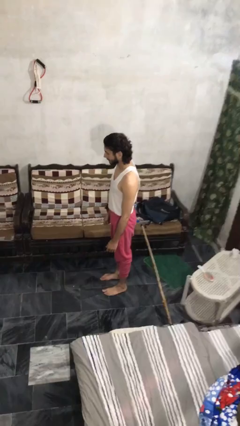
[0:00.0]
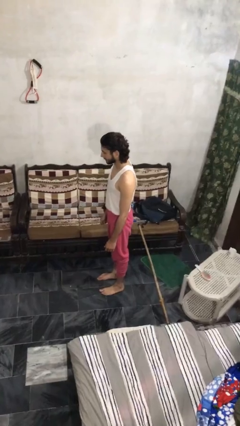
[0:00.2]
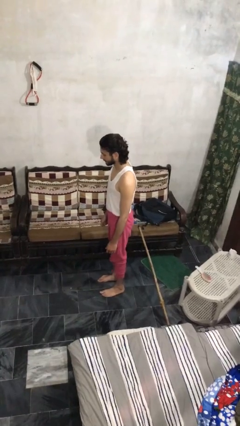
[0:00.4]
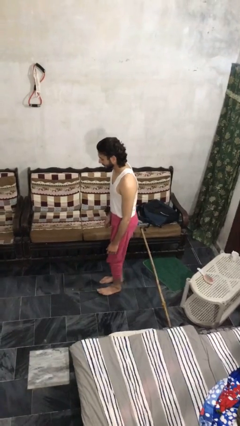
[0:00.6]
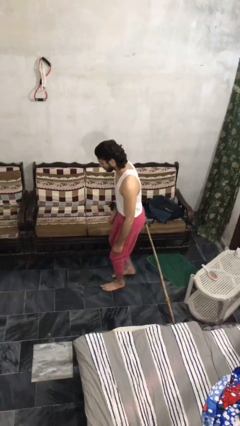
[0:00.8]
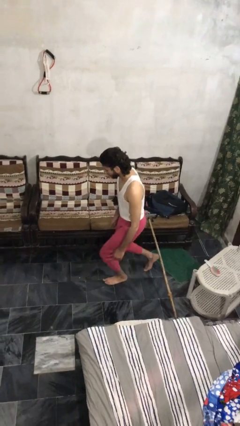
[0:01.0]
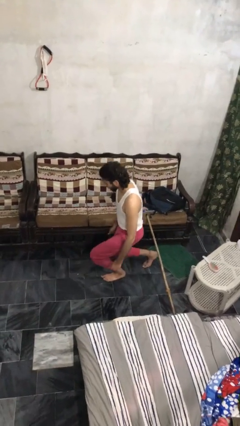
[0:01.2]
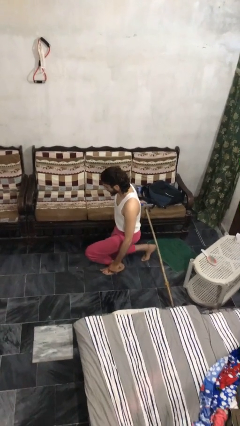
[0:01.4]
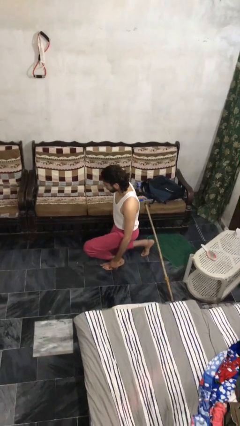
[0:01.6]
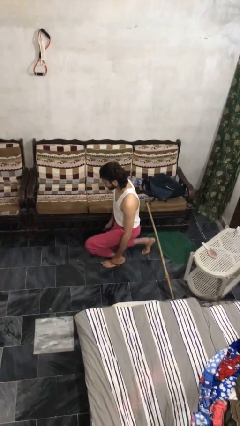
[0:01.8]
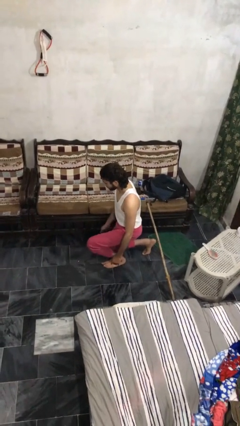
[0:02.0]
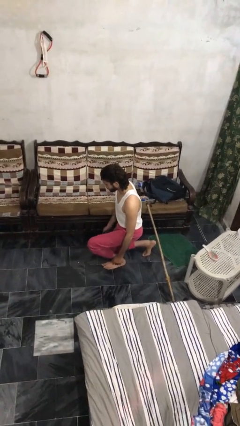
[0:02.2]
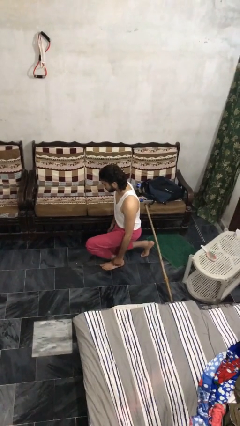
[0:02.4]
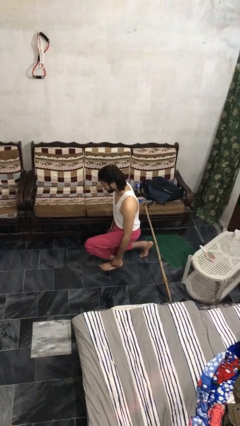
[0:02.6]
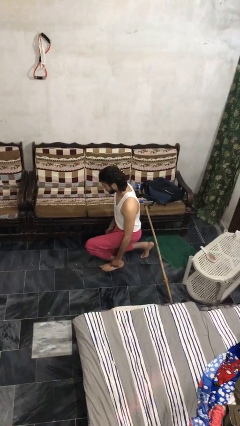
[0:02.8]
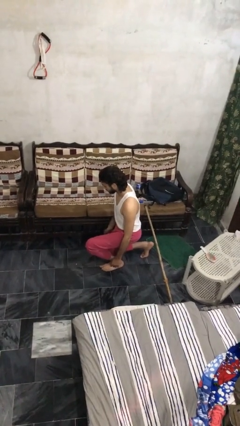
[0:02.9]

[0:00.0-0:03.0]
person kneels

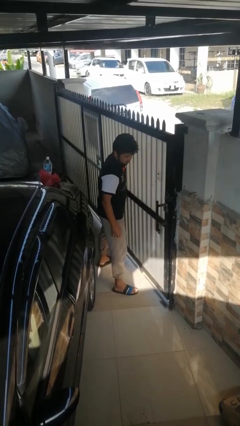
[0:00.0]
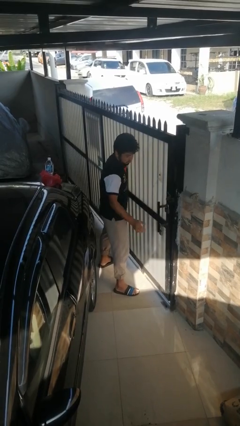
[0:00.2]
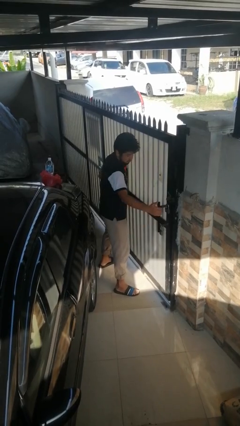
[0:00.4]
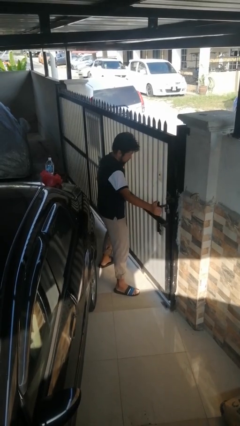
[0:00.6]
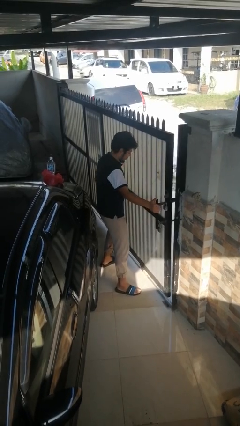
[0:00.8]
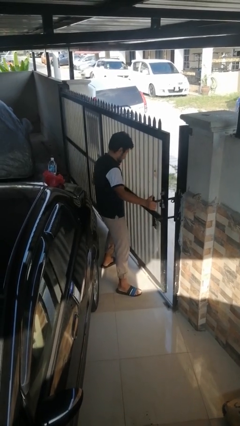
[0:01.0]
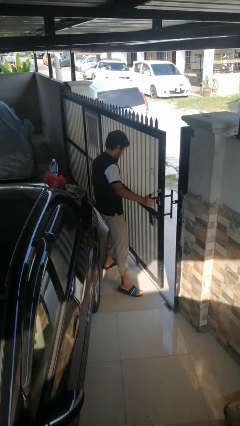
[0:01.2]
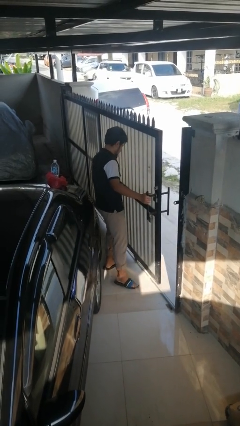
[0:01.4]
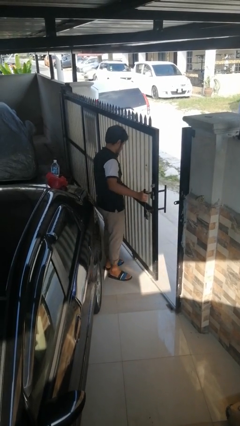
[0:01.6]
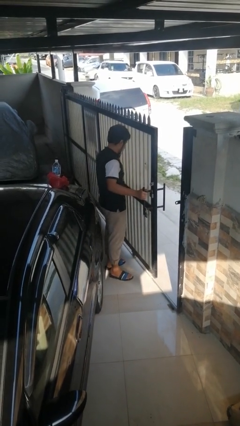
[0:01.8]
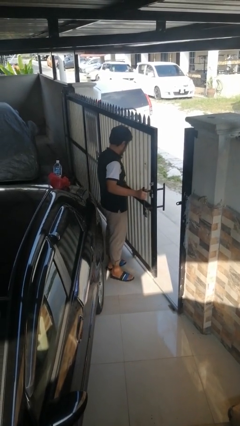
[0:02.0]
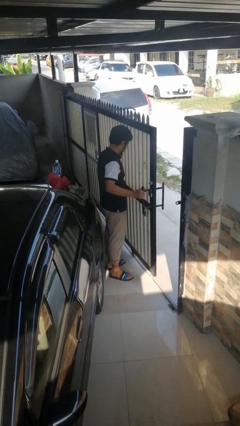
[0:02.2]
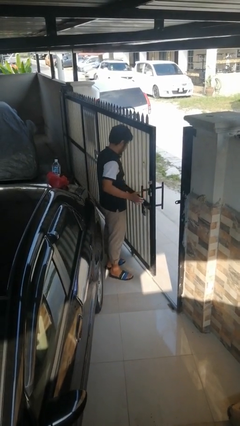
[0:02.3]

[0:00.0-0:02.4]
person opens sliding door

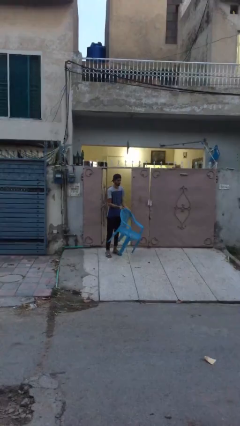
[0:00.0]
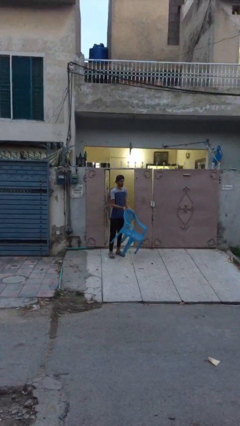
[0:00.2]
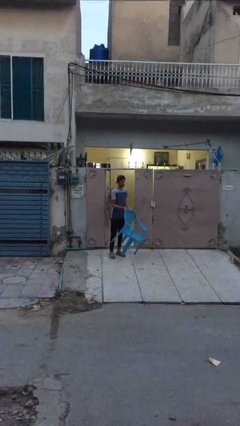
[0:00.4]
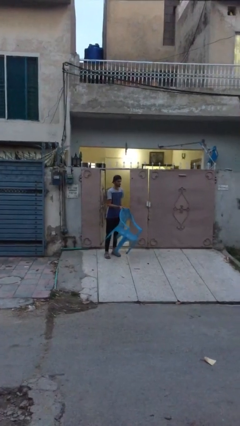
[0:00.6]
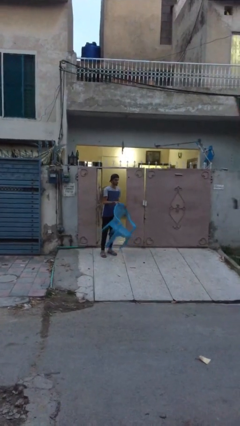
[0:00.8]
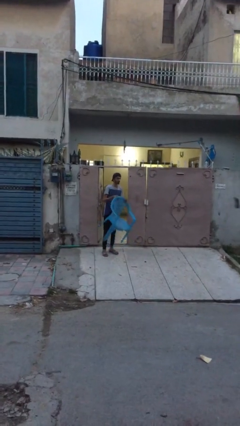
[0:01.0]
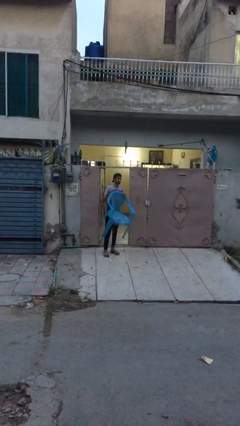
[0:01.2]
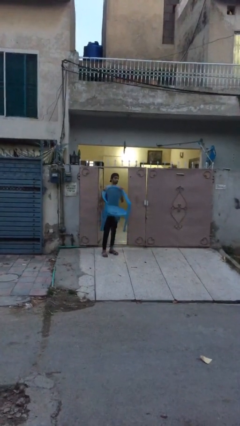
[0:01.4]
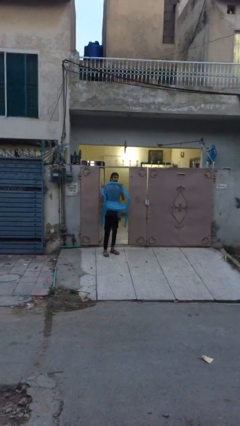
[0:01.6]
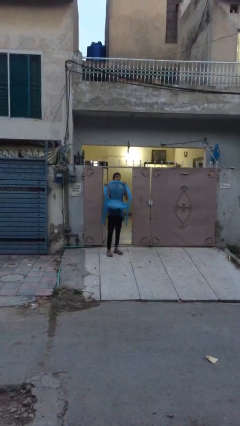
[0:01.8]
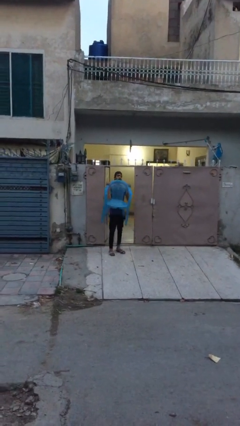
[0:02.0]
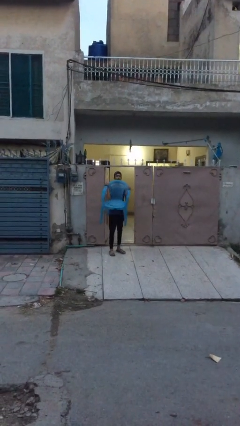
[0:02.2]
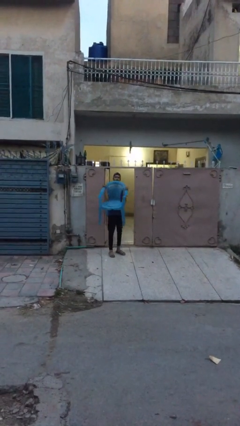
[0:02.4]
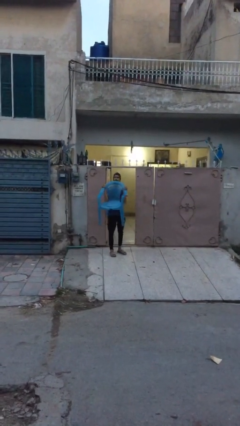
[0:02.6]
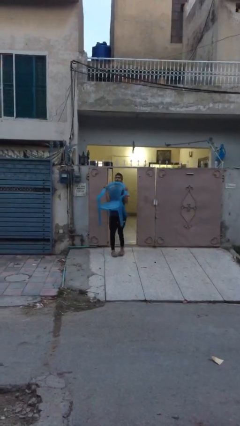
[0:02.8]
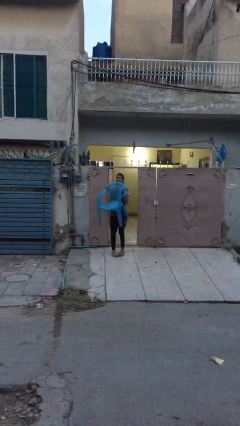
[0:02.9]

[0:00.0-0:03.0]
person carries heavy object

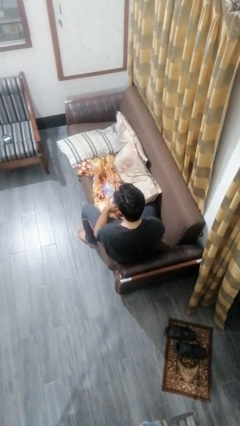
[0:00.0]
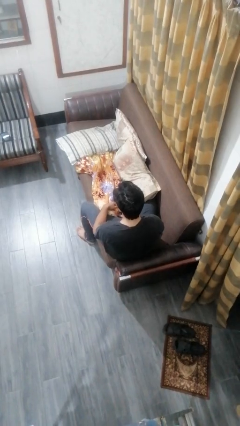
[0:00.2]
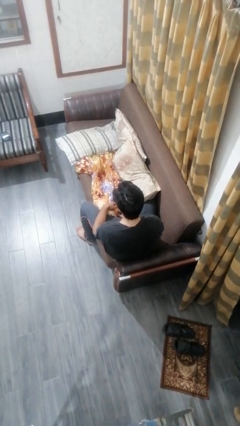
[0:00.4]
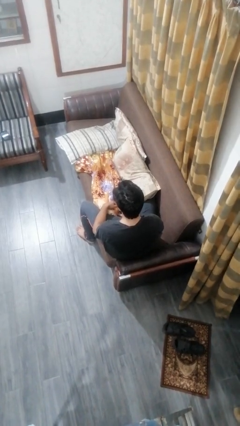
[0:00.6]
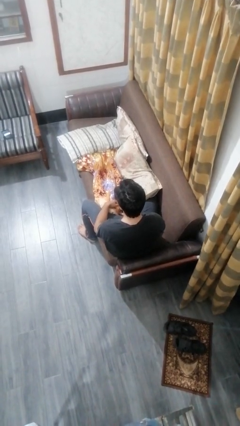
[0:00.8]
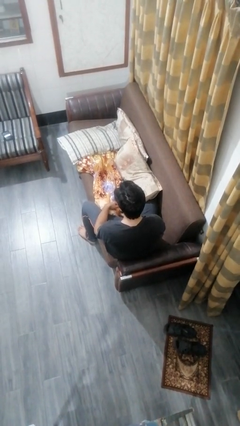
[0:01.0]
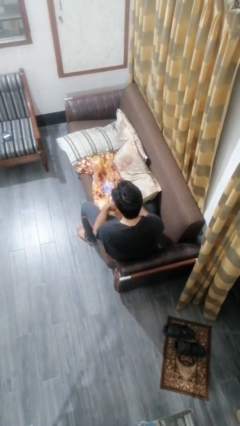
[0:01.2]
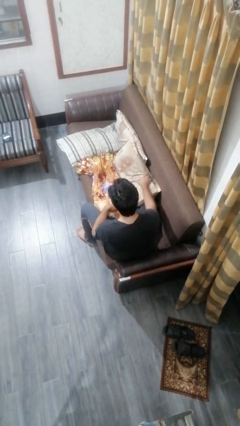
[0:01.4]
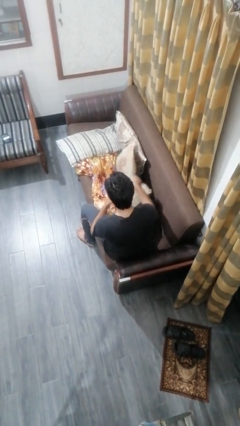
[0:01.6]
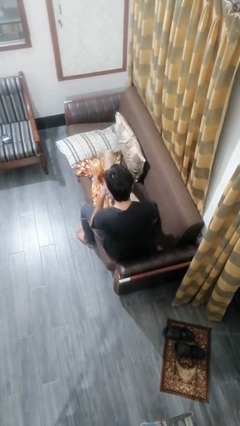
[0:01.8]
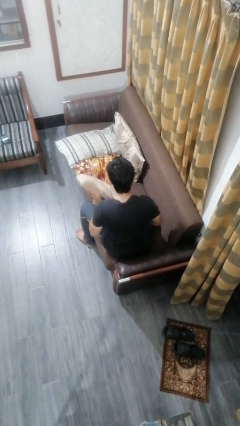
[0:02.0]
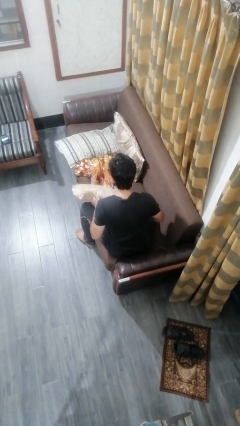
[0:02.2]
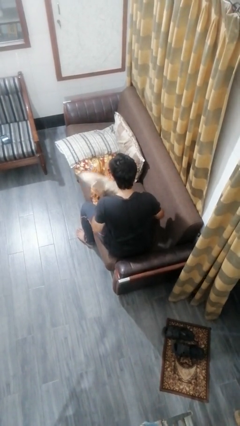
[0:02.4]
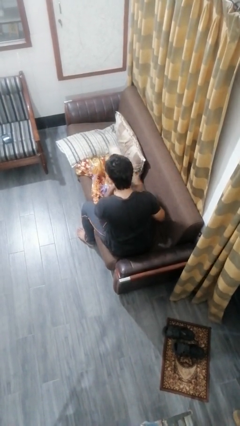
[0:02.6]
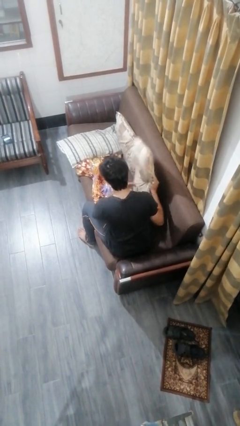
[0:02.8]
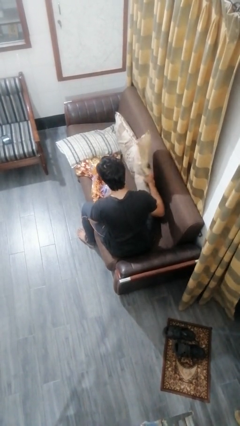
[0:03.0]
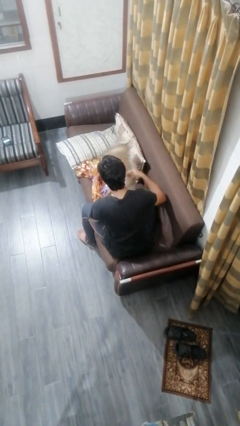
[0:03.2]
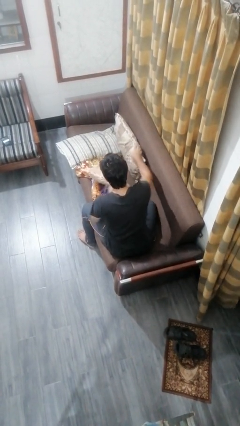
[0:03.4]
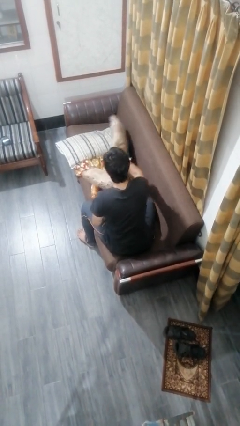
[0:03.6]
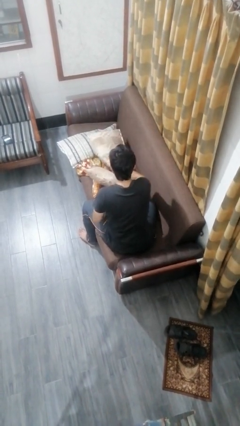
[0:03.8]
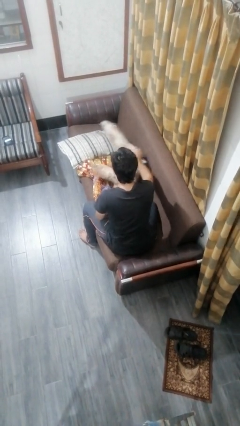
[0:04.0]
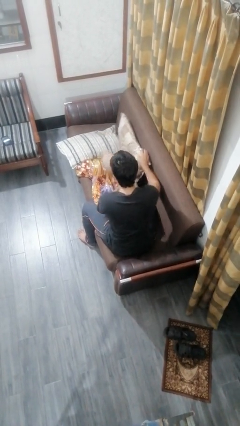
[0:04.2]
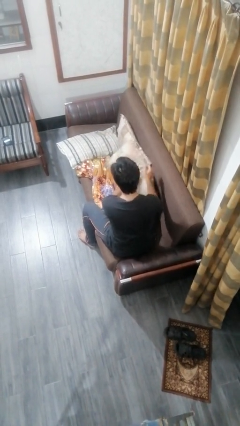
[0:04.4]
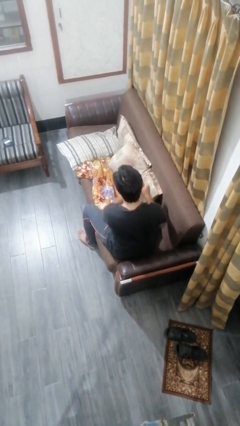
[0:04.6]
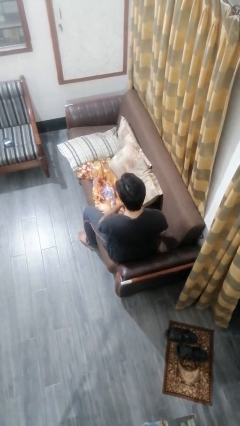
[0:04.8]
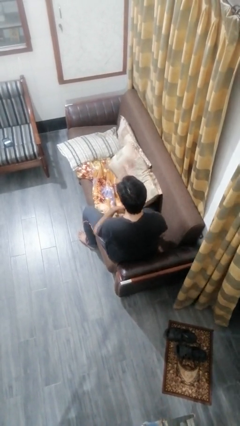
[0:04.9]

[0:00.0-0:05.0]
person searches in couch

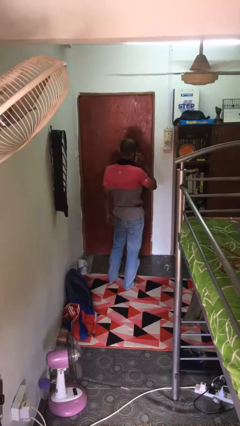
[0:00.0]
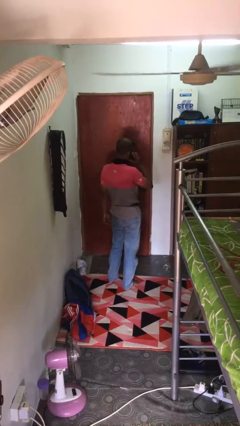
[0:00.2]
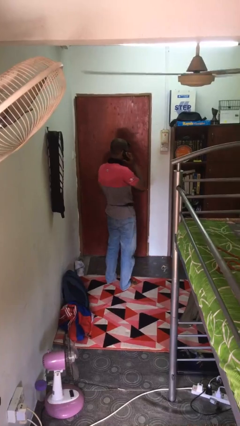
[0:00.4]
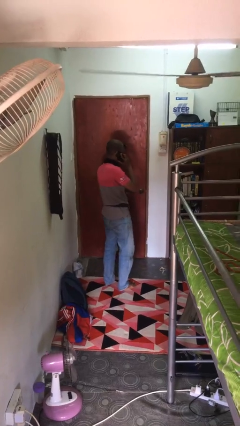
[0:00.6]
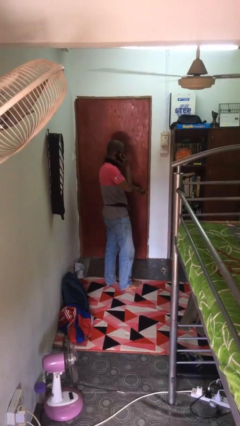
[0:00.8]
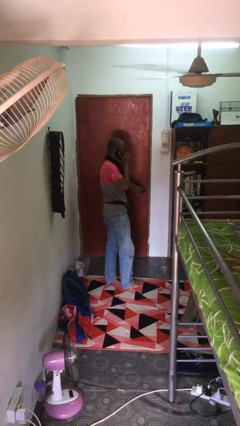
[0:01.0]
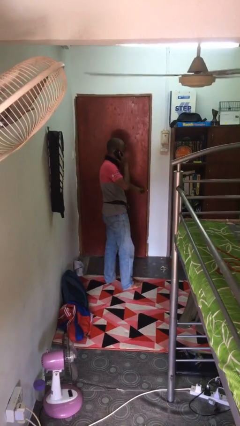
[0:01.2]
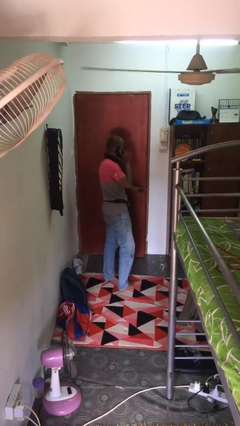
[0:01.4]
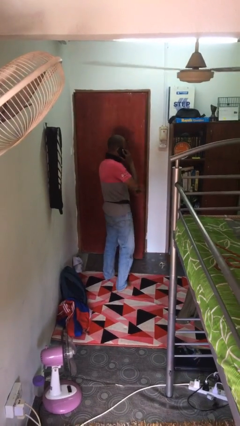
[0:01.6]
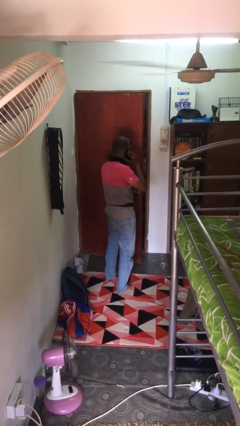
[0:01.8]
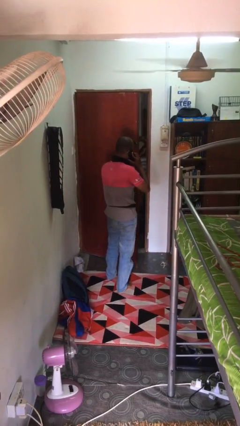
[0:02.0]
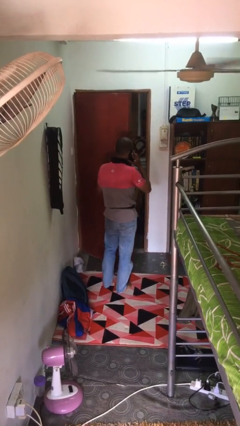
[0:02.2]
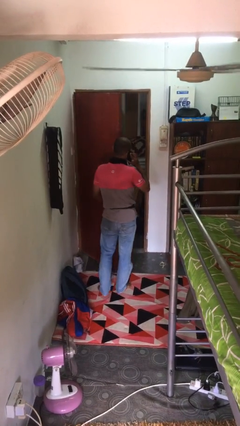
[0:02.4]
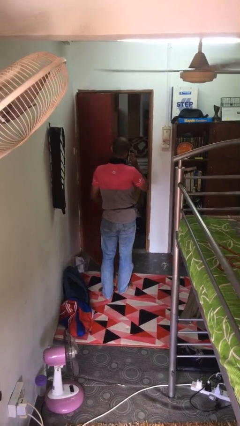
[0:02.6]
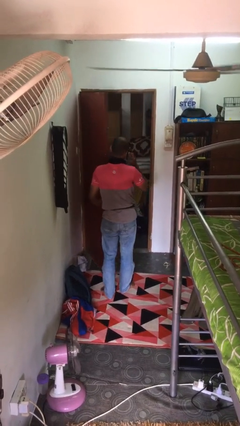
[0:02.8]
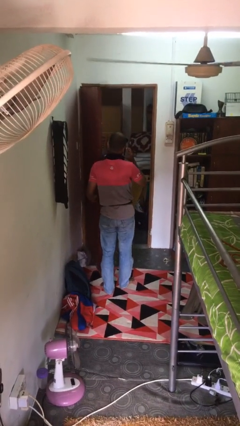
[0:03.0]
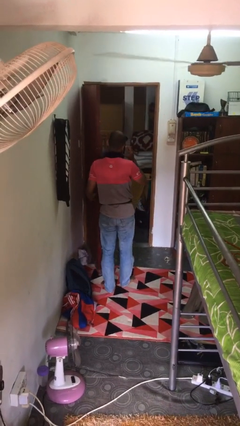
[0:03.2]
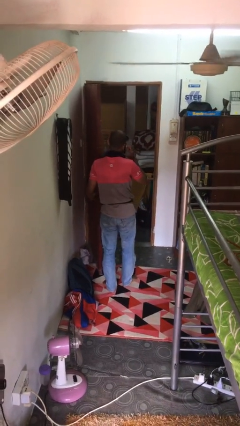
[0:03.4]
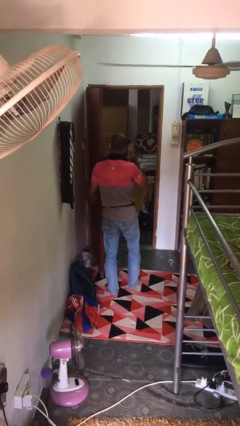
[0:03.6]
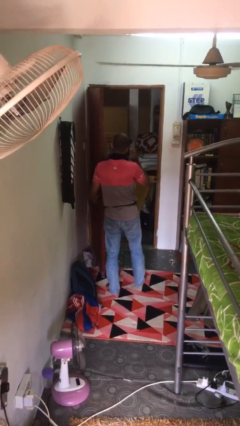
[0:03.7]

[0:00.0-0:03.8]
person opens facility door

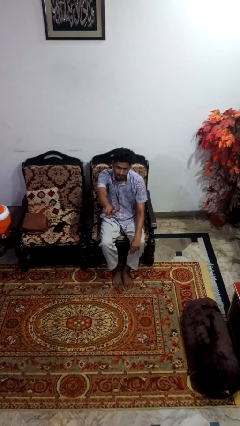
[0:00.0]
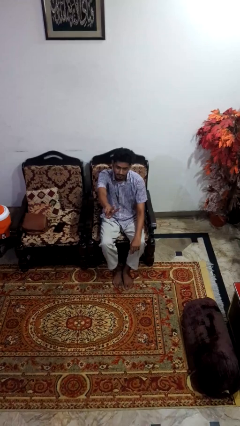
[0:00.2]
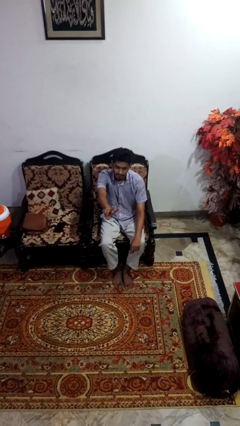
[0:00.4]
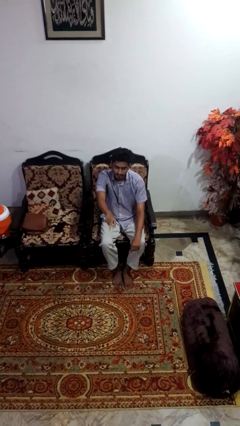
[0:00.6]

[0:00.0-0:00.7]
person gestures peace
